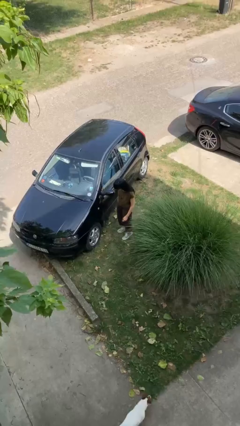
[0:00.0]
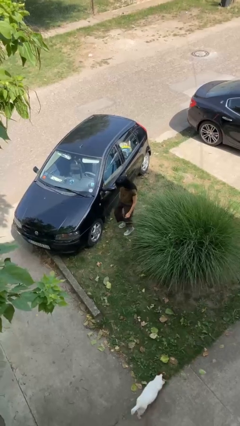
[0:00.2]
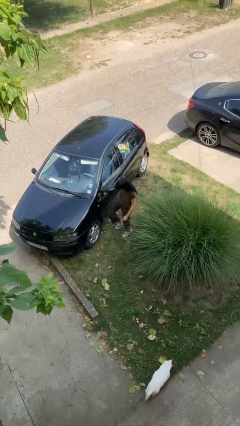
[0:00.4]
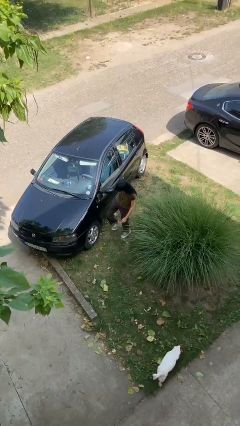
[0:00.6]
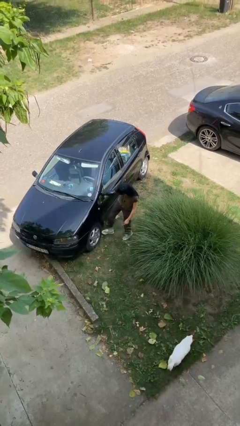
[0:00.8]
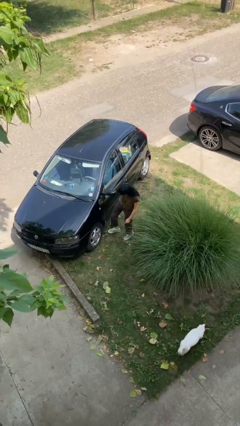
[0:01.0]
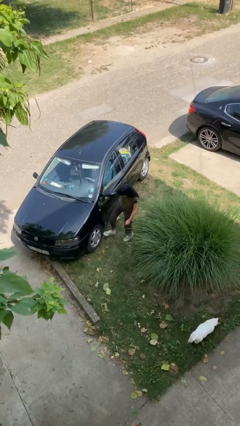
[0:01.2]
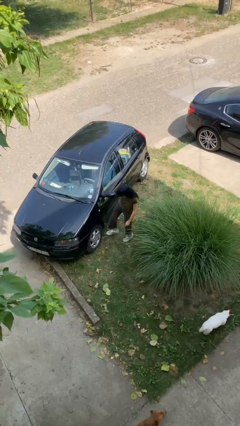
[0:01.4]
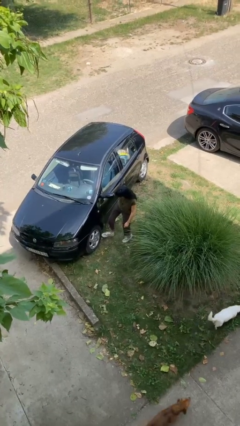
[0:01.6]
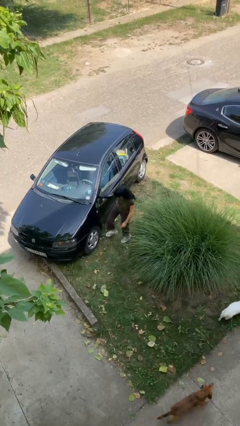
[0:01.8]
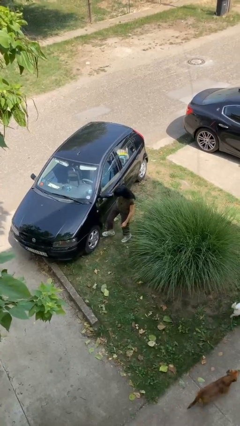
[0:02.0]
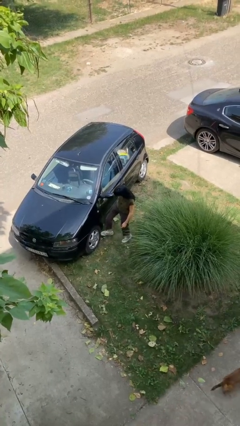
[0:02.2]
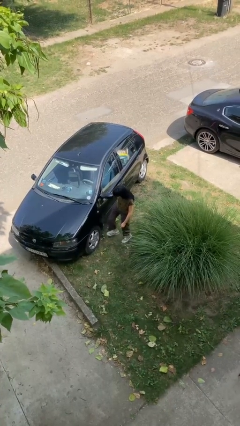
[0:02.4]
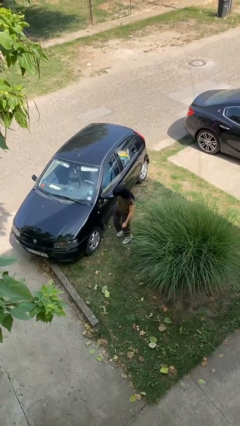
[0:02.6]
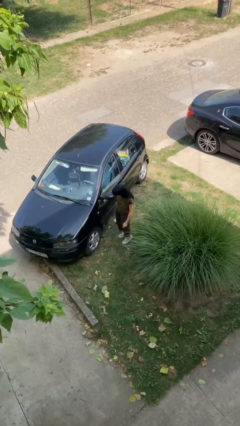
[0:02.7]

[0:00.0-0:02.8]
person kicks car tires

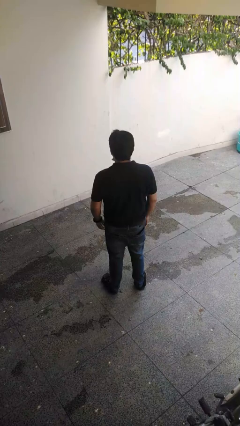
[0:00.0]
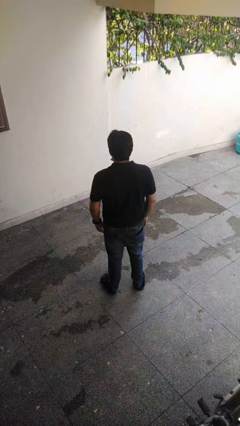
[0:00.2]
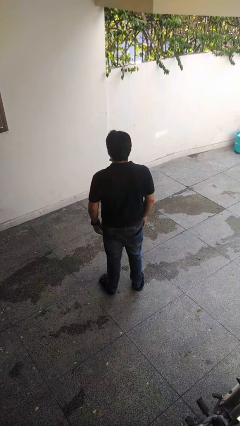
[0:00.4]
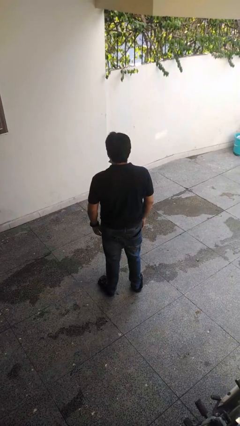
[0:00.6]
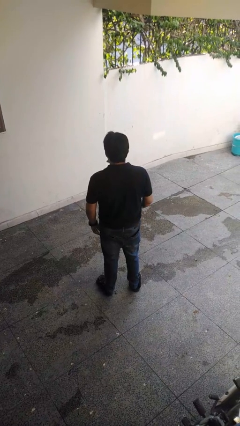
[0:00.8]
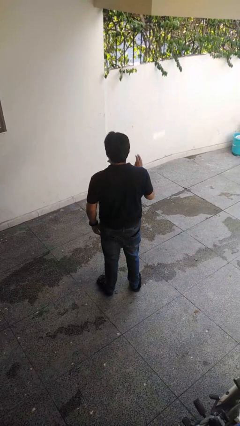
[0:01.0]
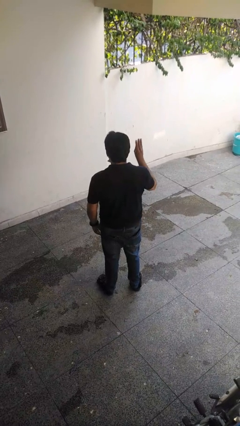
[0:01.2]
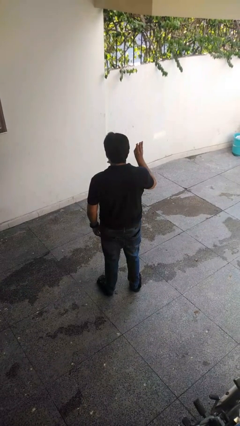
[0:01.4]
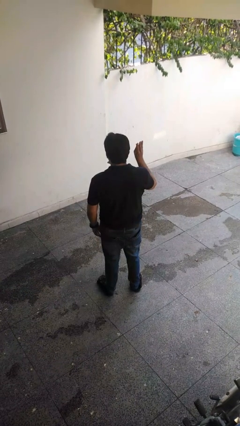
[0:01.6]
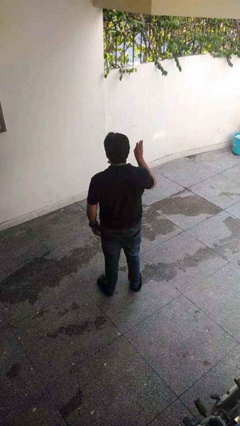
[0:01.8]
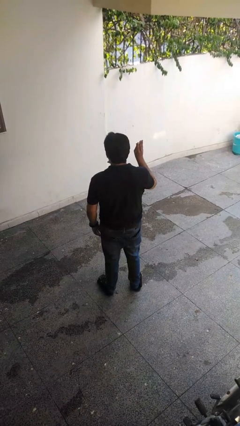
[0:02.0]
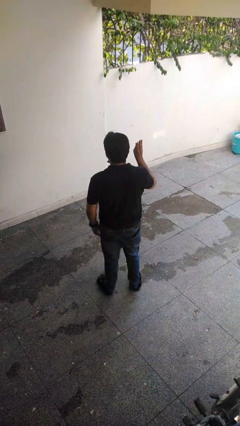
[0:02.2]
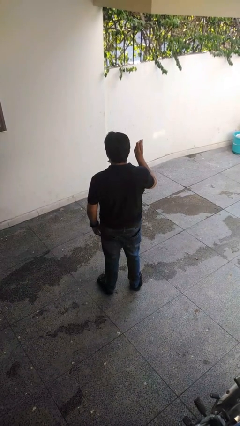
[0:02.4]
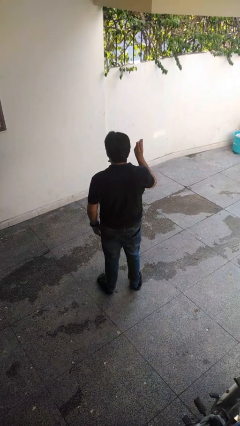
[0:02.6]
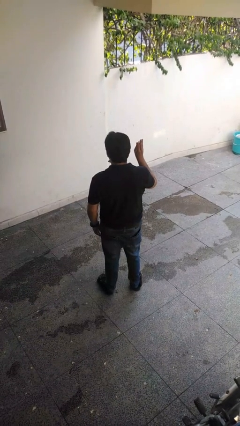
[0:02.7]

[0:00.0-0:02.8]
person gestures number three

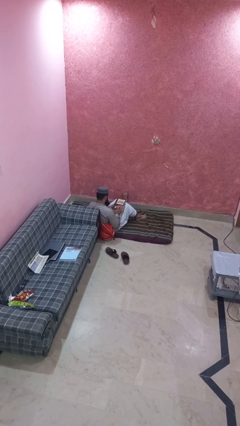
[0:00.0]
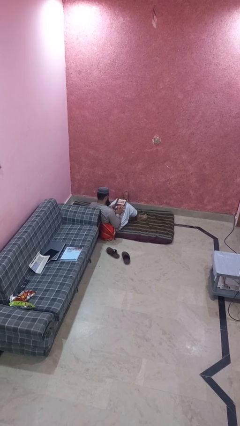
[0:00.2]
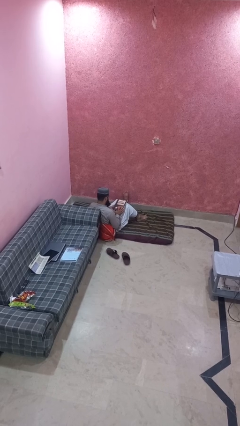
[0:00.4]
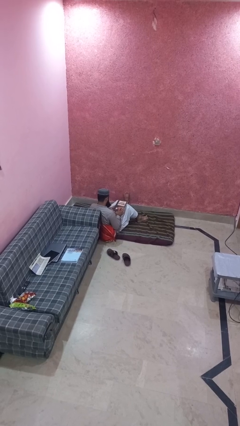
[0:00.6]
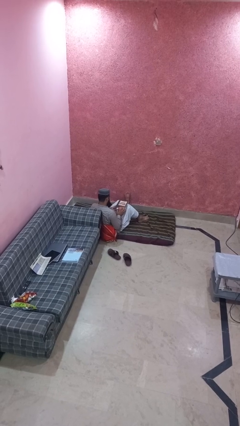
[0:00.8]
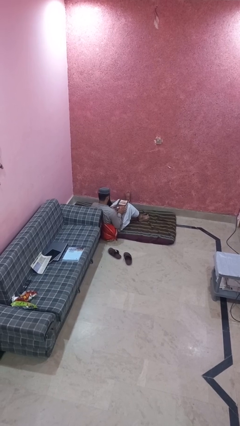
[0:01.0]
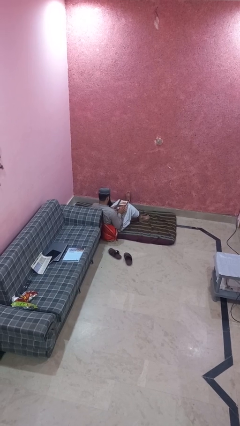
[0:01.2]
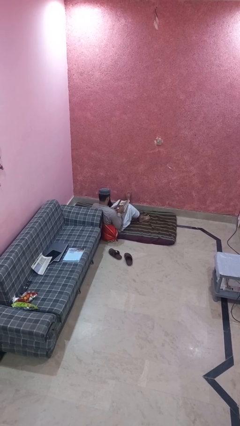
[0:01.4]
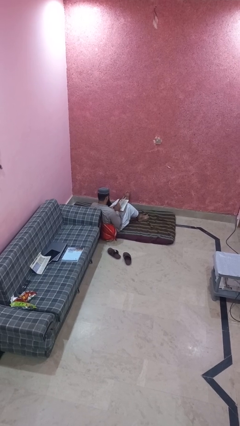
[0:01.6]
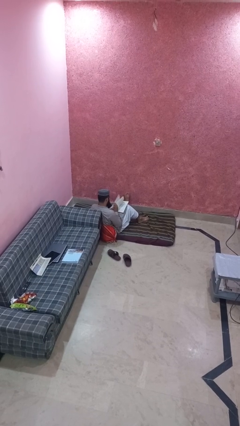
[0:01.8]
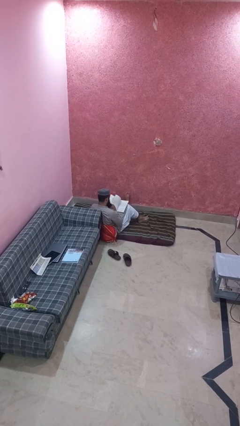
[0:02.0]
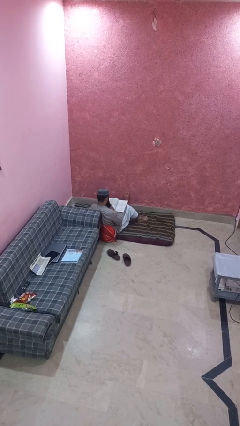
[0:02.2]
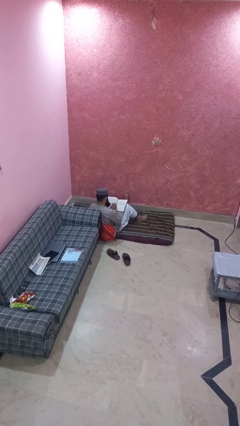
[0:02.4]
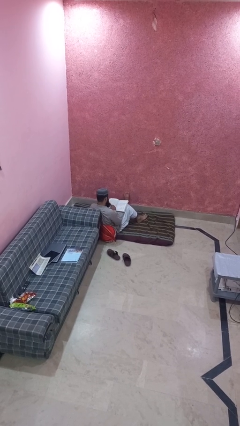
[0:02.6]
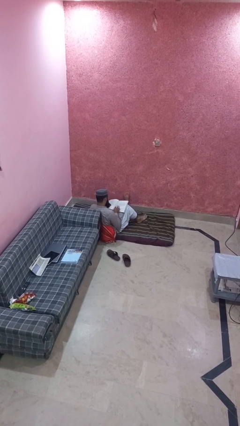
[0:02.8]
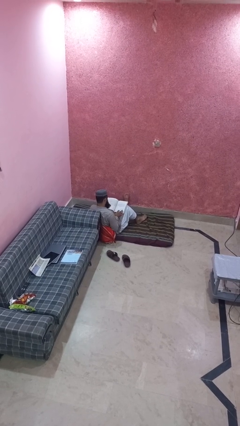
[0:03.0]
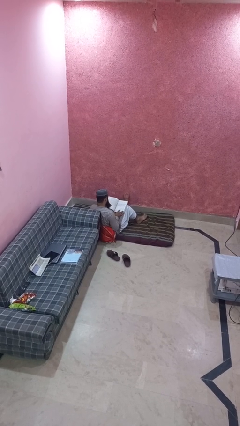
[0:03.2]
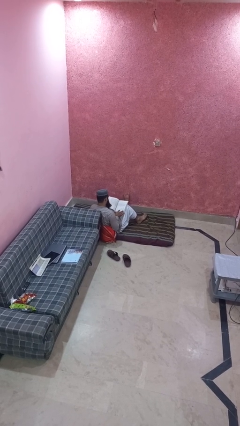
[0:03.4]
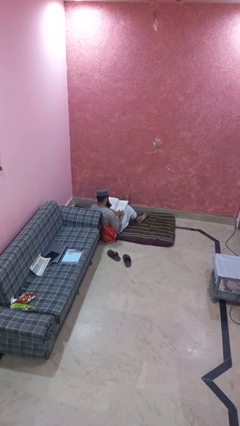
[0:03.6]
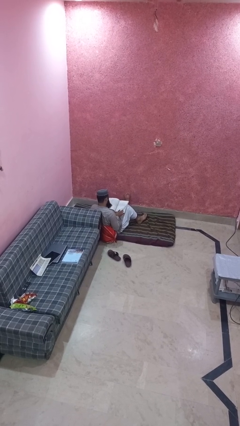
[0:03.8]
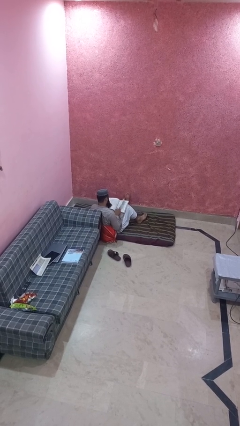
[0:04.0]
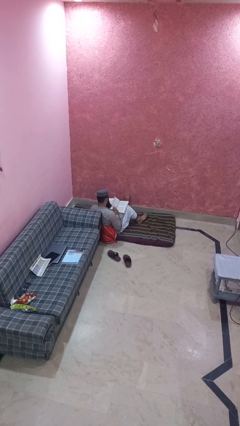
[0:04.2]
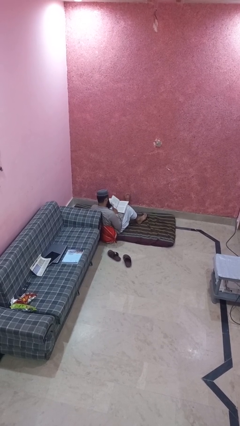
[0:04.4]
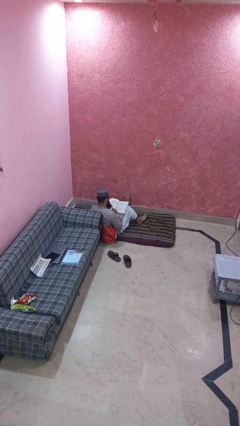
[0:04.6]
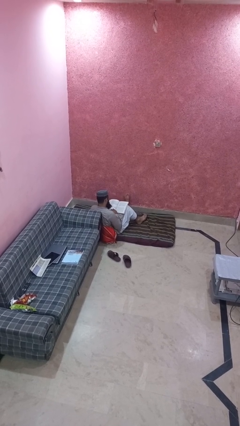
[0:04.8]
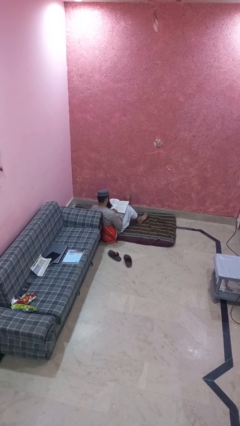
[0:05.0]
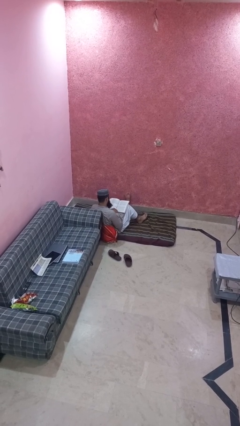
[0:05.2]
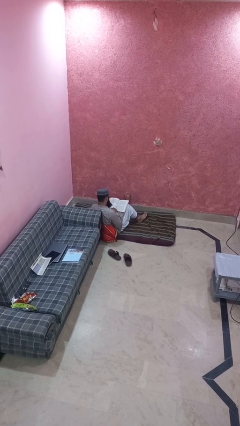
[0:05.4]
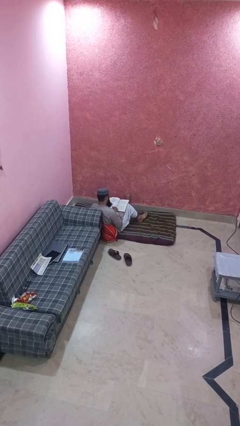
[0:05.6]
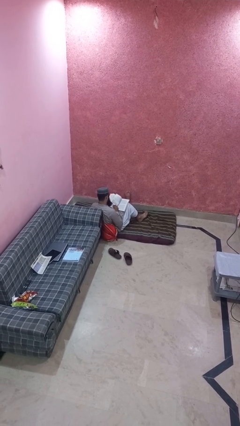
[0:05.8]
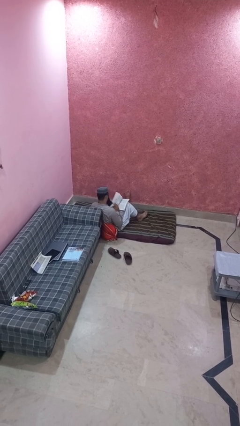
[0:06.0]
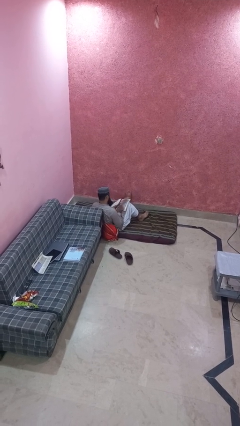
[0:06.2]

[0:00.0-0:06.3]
person reads book

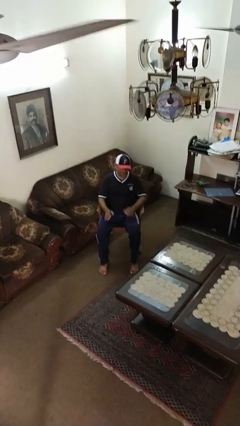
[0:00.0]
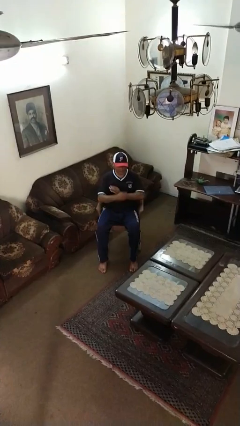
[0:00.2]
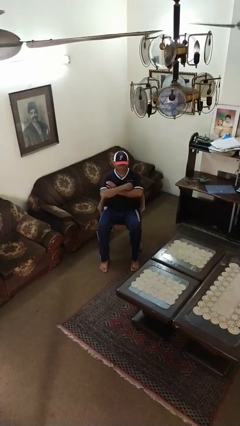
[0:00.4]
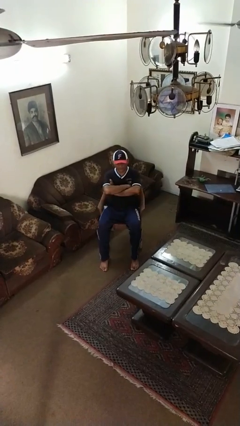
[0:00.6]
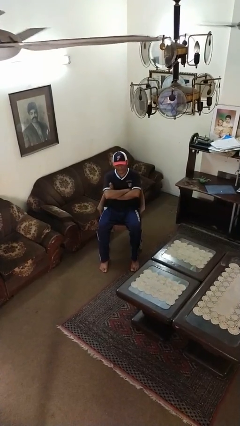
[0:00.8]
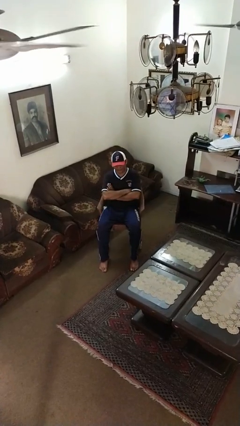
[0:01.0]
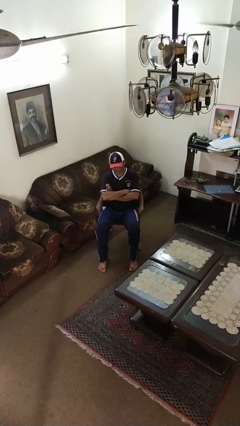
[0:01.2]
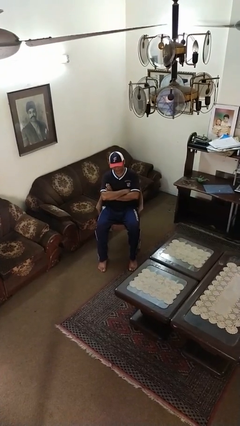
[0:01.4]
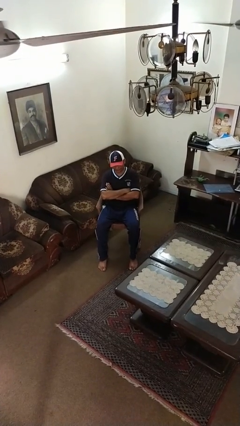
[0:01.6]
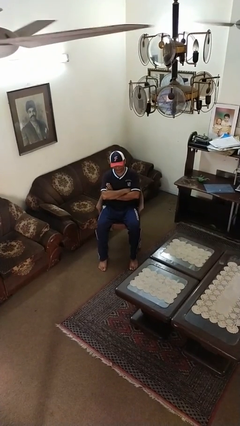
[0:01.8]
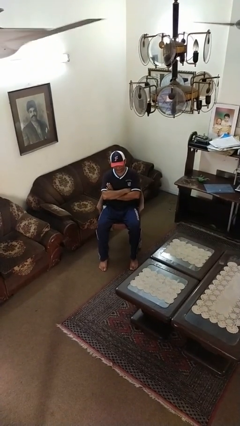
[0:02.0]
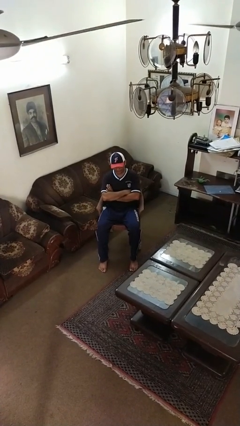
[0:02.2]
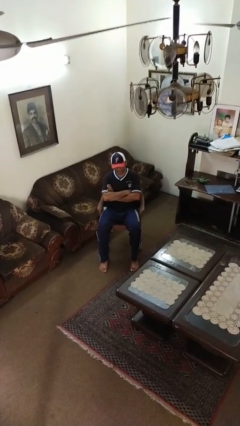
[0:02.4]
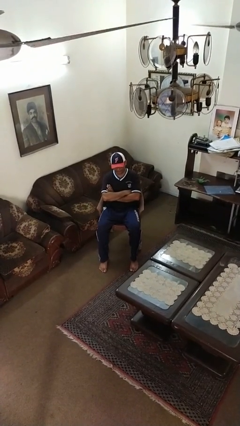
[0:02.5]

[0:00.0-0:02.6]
person crosses arms

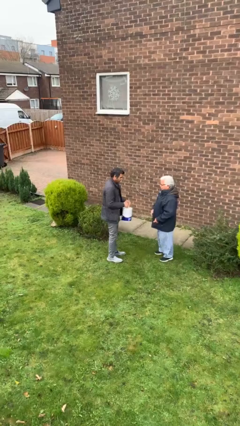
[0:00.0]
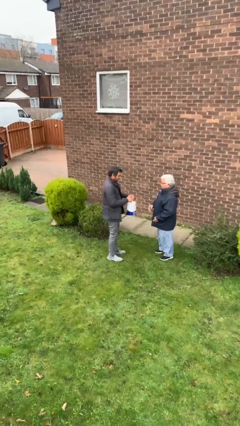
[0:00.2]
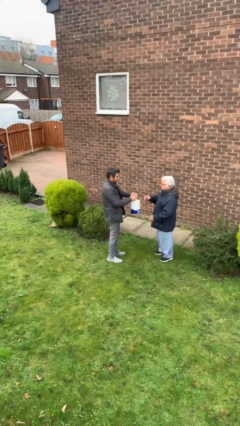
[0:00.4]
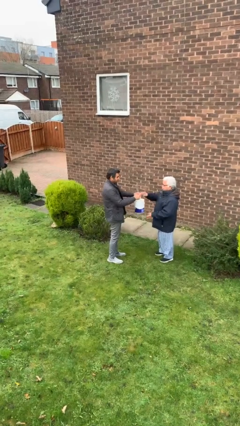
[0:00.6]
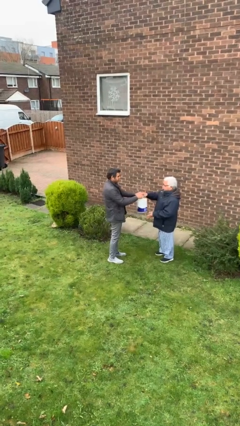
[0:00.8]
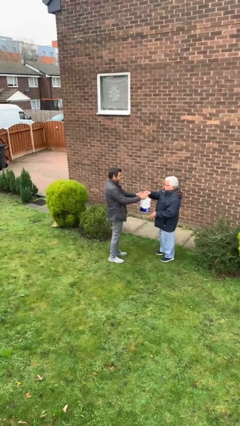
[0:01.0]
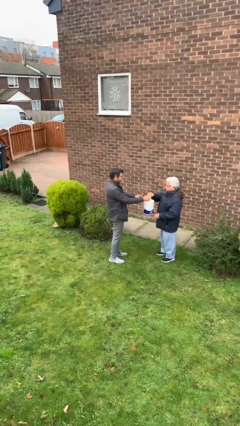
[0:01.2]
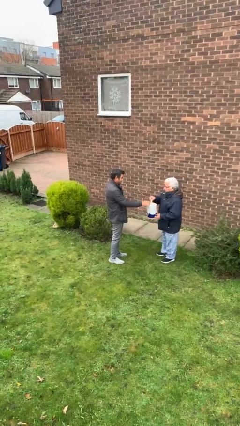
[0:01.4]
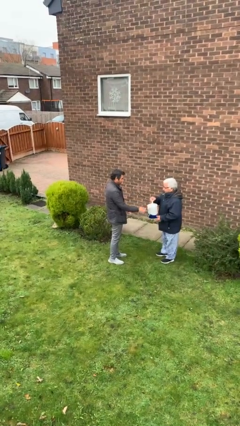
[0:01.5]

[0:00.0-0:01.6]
person transfers object to person

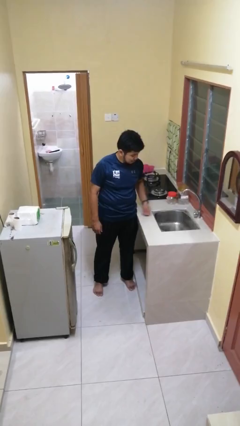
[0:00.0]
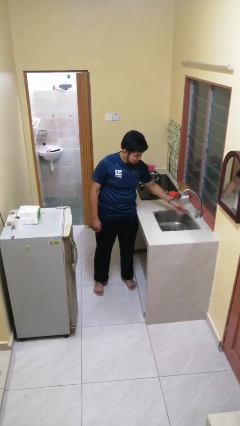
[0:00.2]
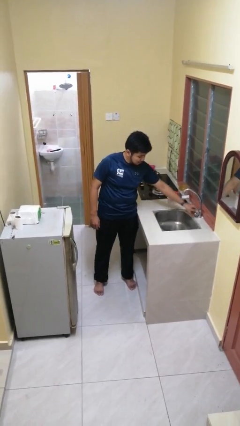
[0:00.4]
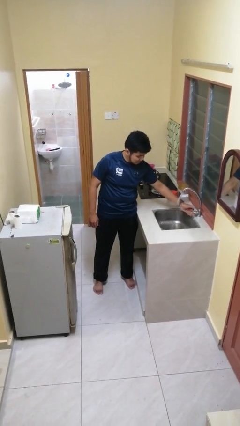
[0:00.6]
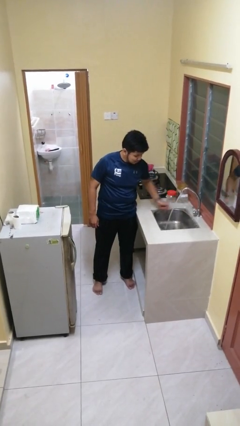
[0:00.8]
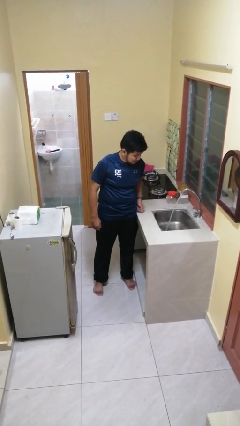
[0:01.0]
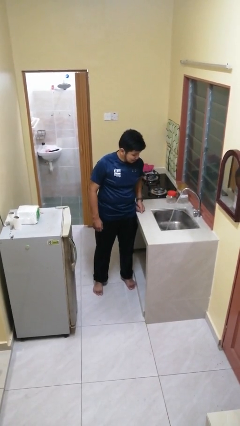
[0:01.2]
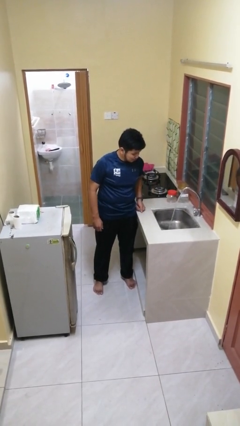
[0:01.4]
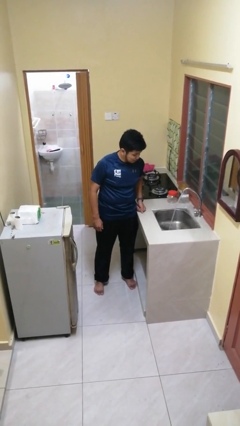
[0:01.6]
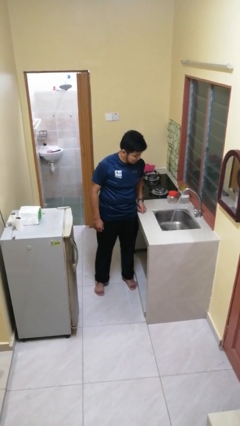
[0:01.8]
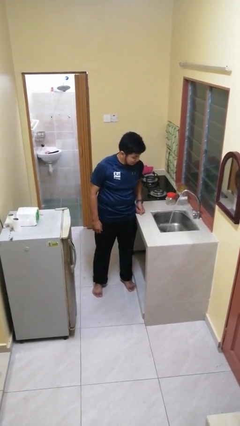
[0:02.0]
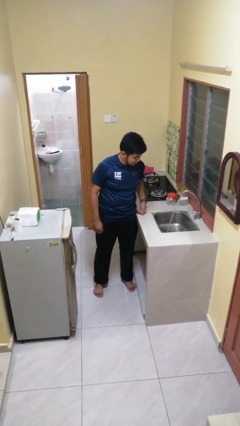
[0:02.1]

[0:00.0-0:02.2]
person turns on faucet
